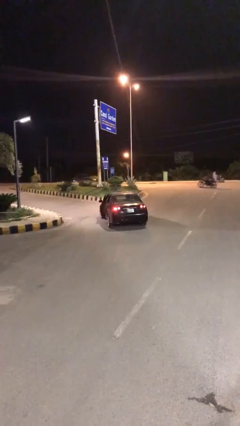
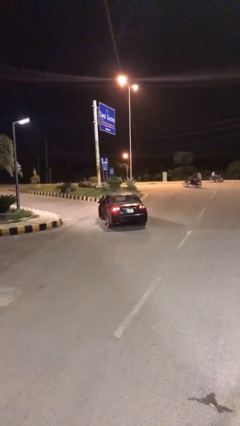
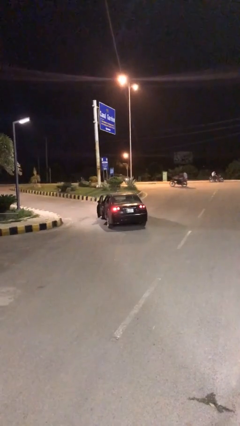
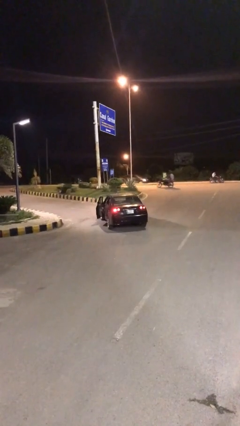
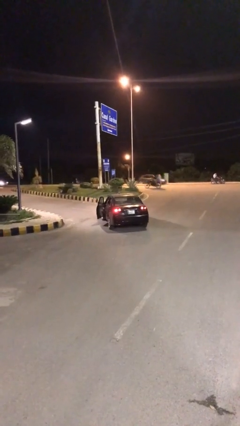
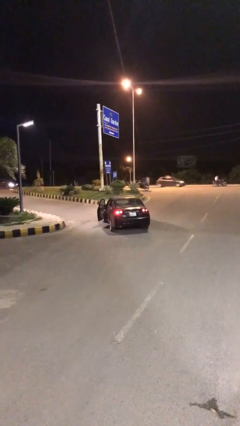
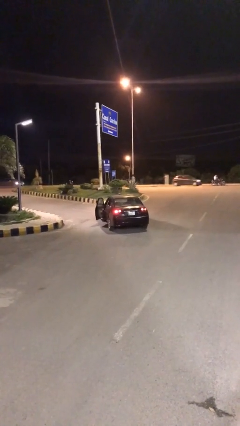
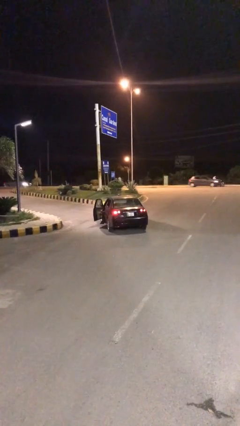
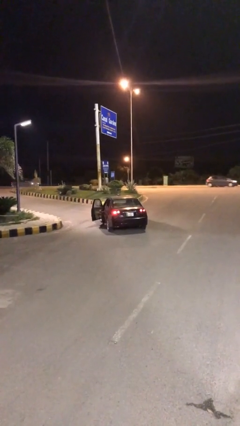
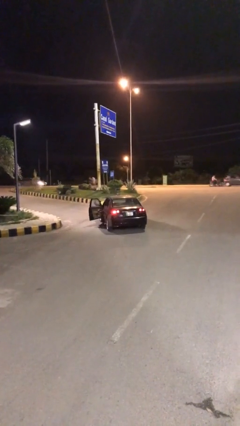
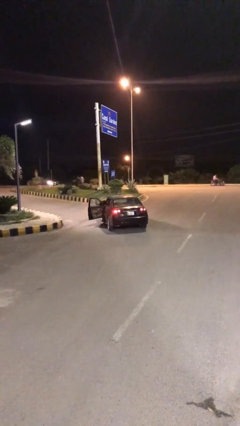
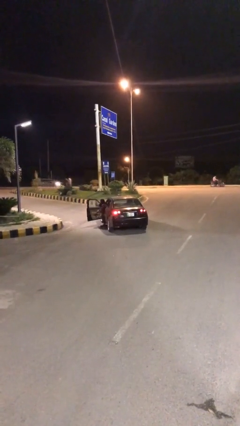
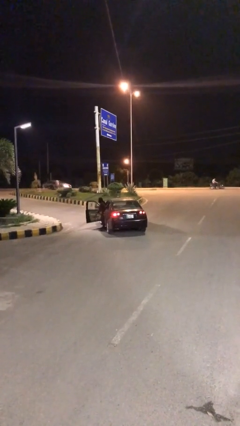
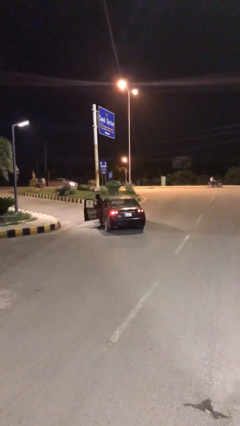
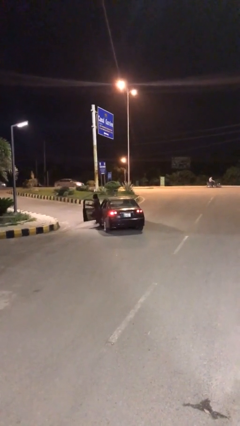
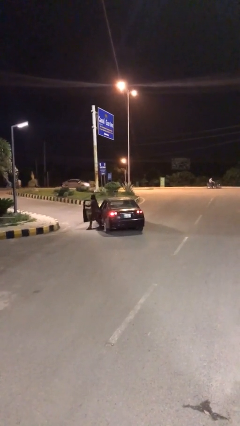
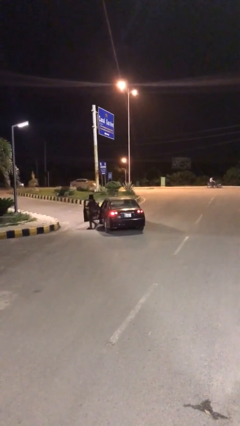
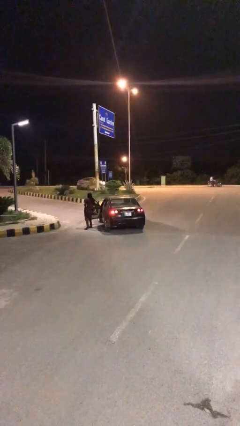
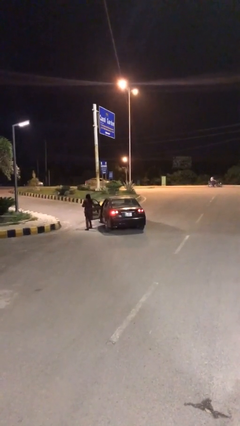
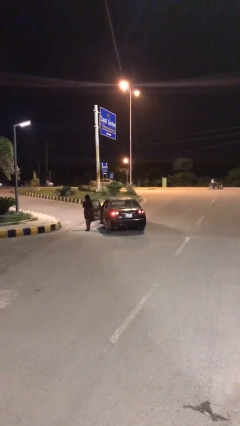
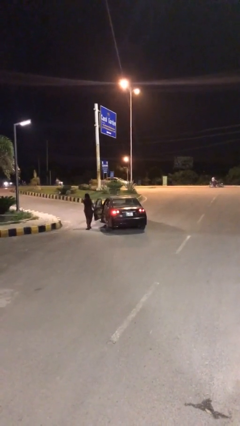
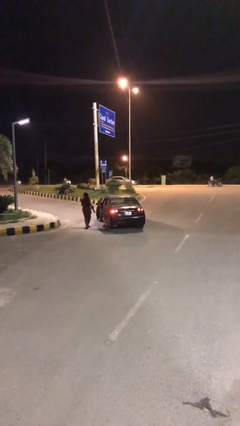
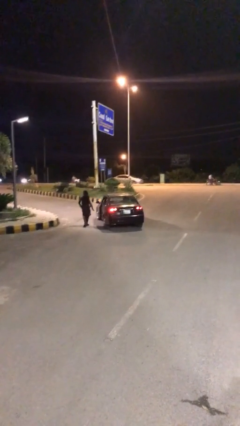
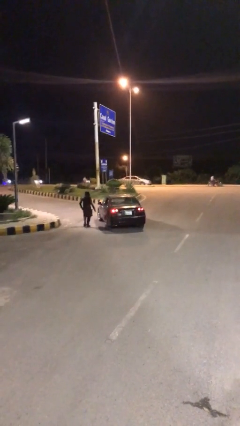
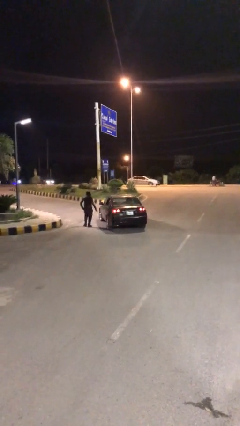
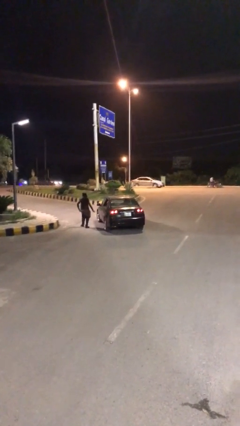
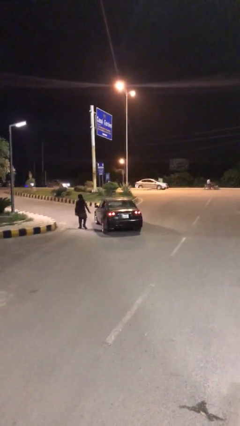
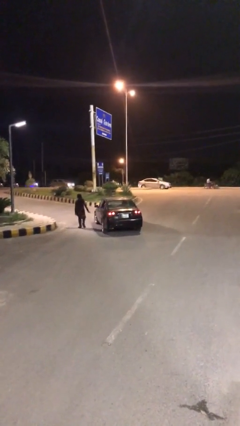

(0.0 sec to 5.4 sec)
car drops off person

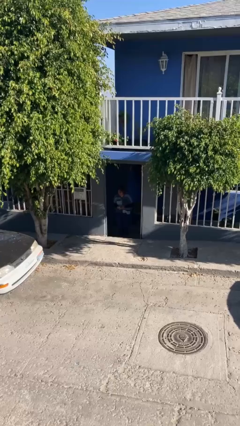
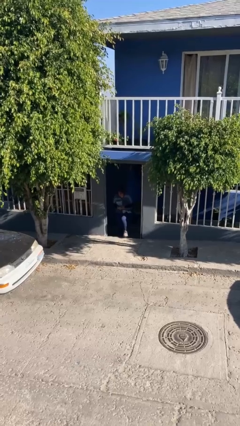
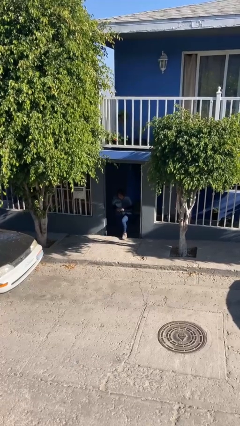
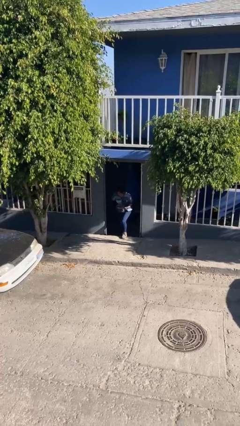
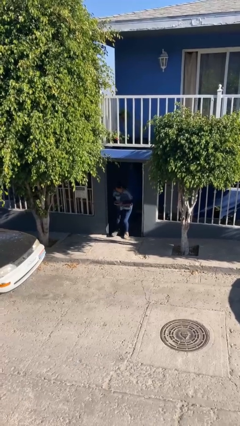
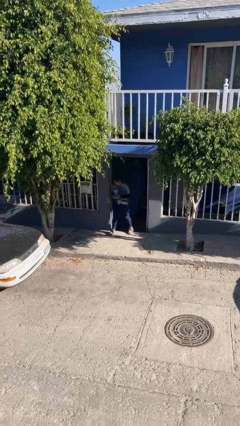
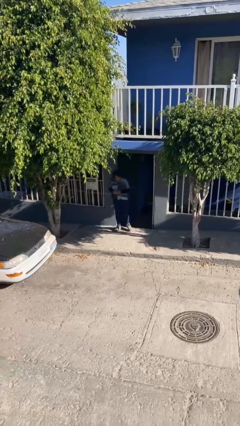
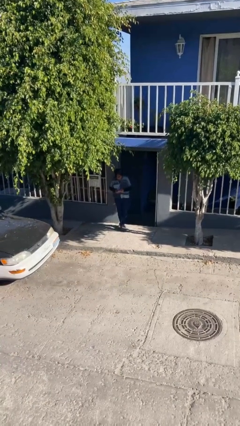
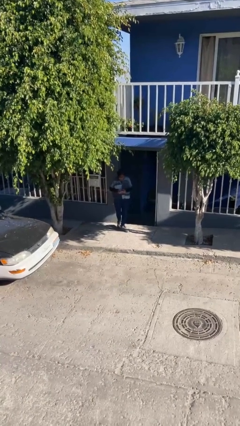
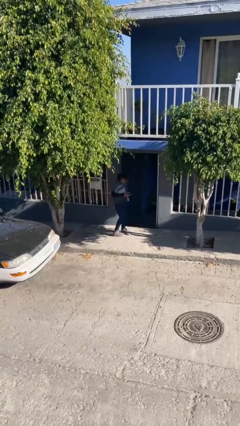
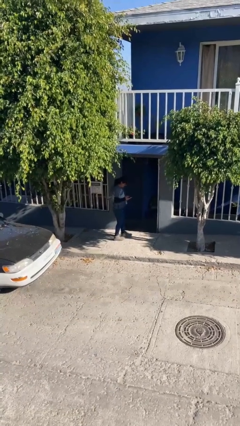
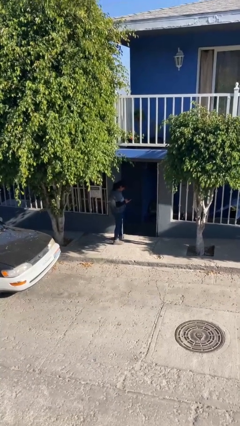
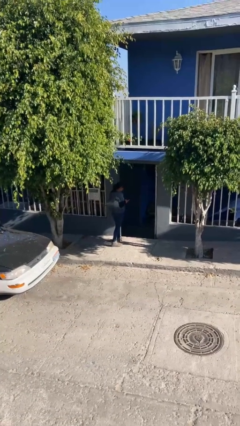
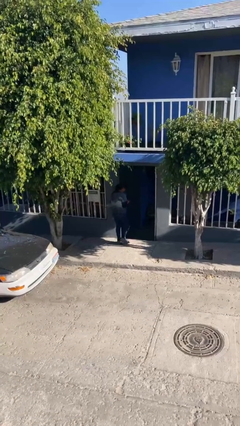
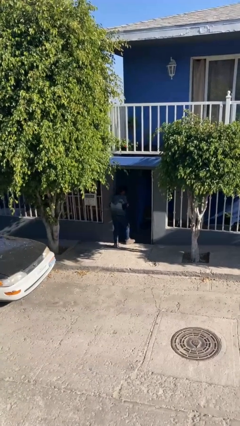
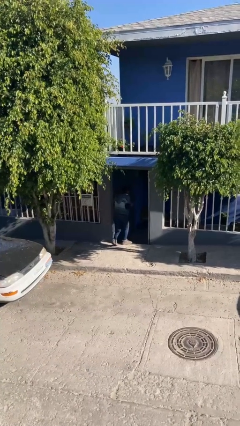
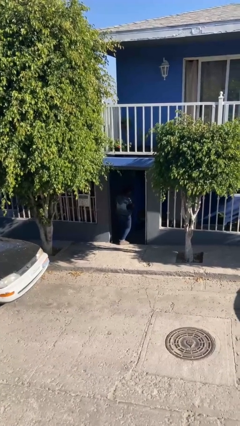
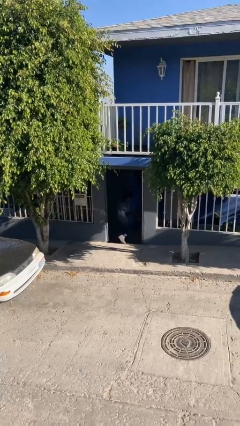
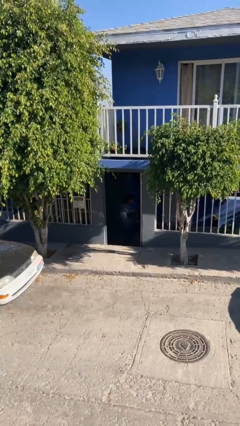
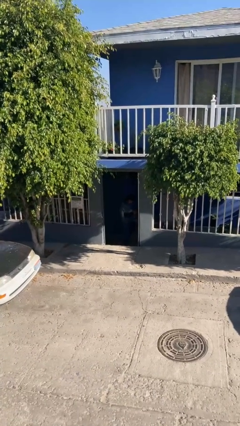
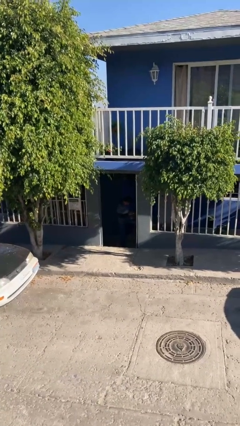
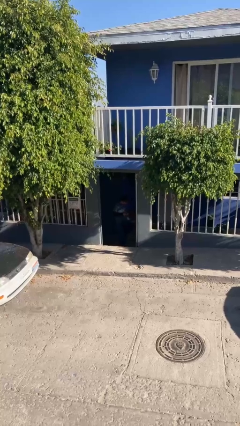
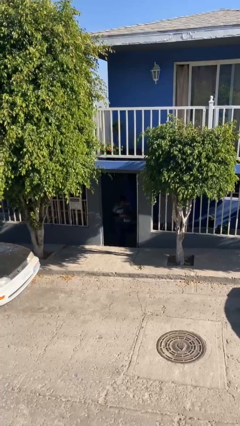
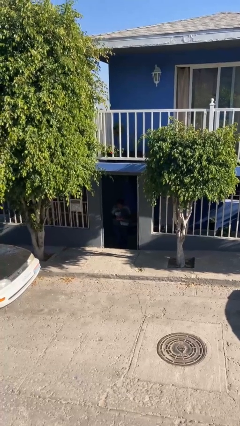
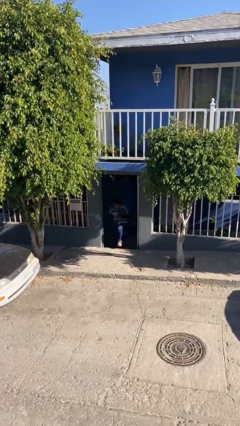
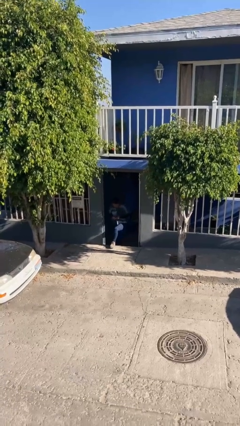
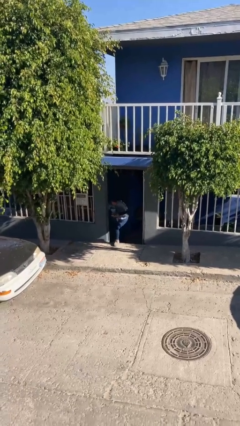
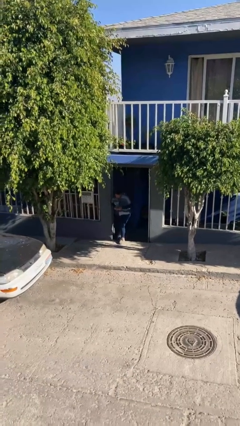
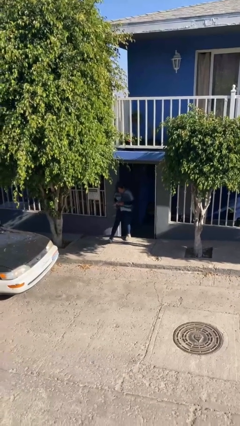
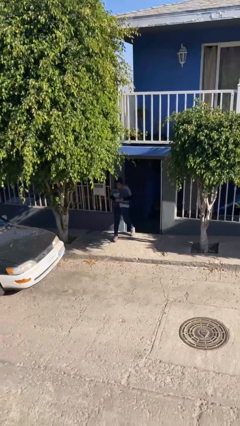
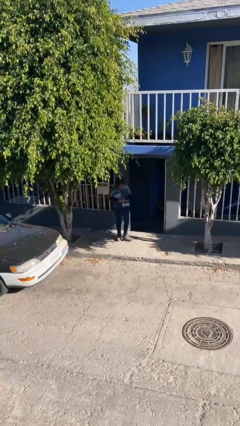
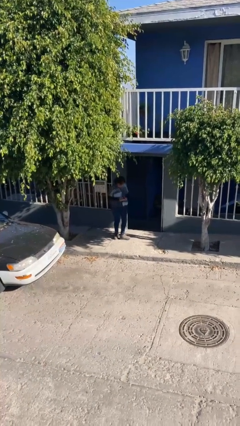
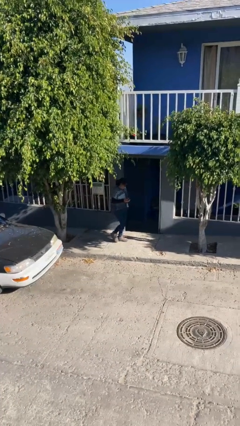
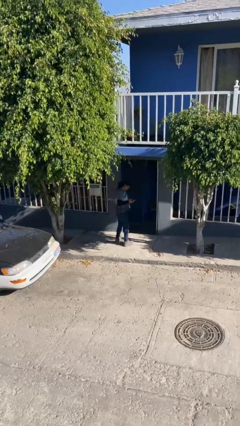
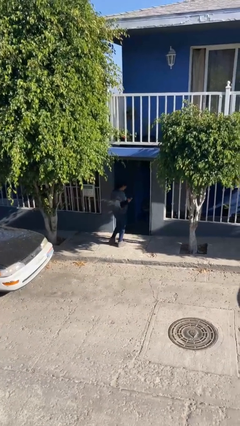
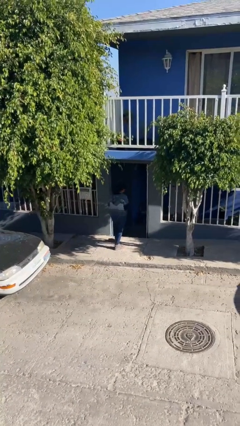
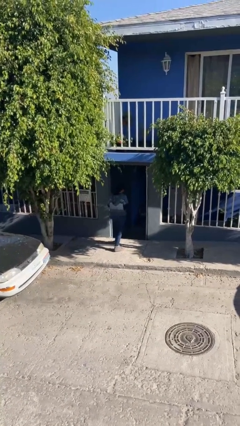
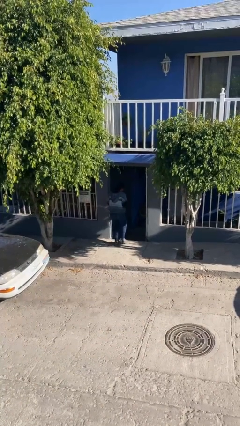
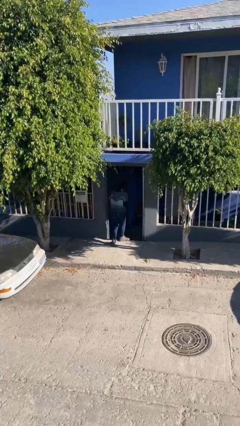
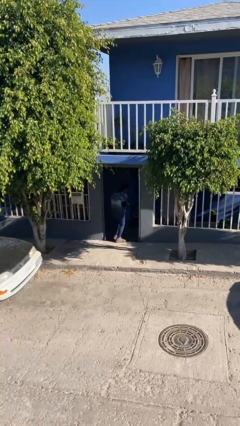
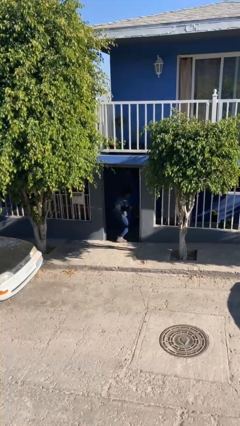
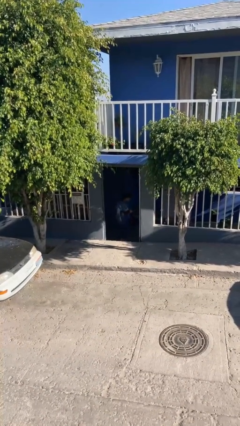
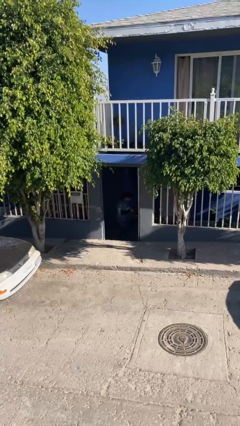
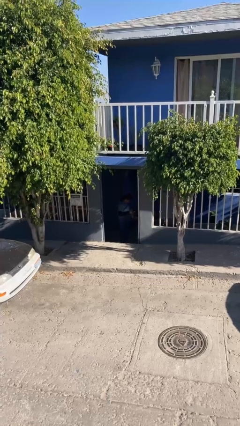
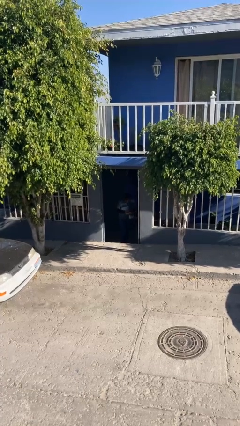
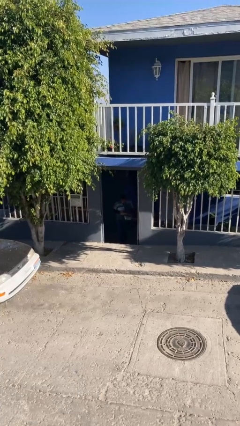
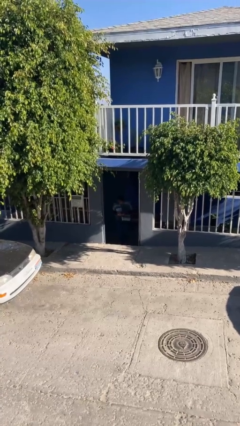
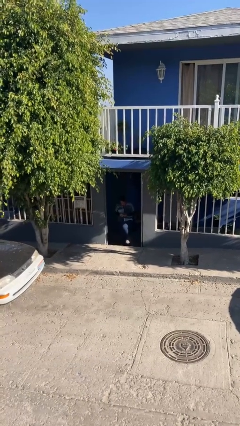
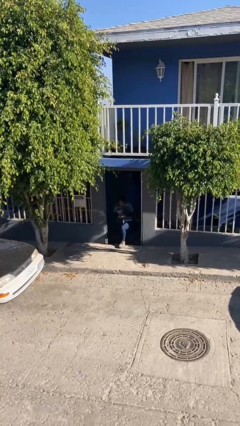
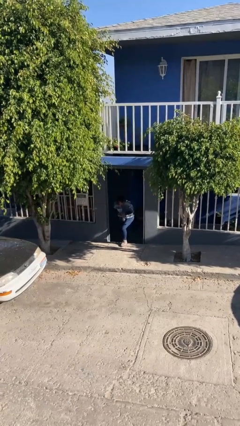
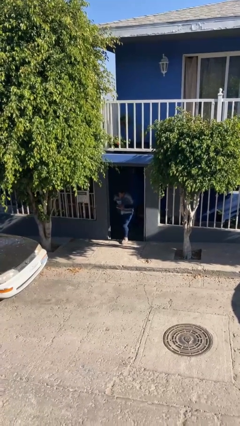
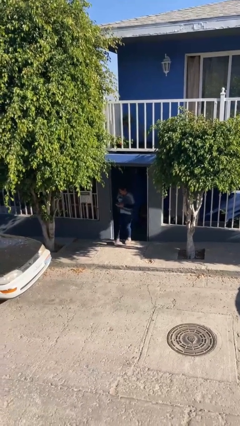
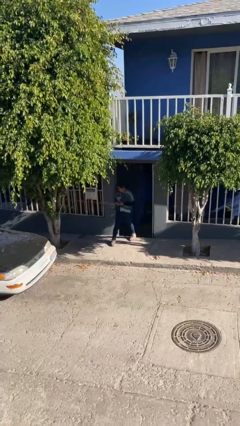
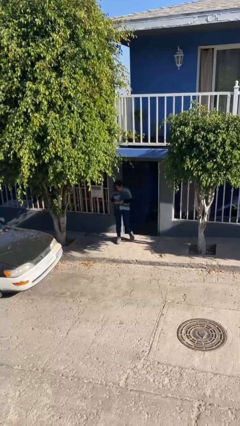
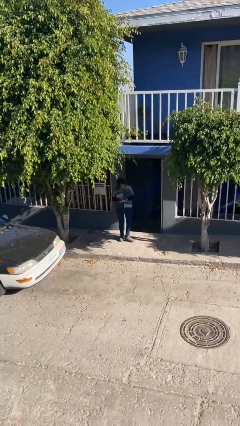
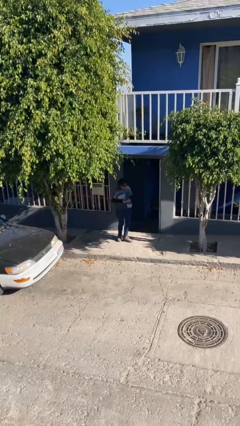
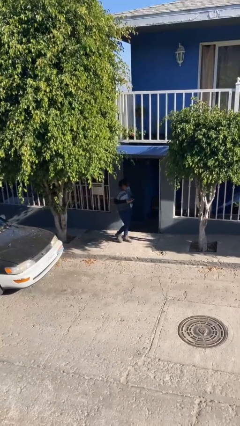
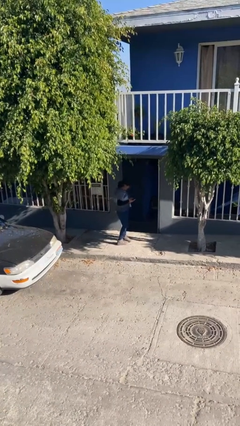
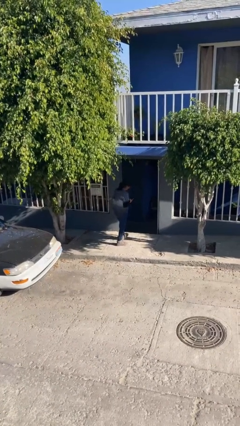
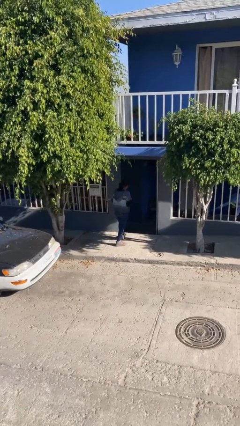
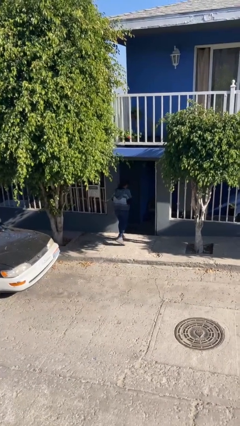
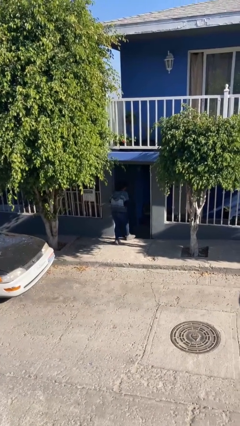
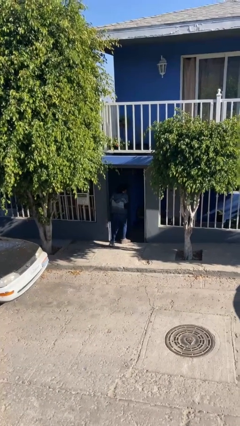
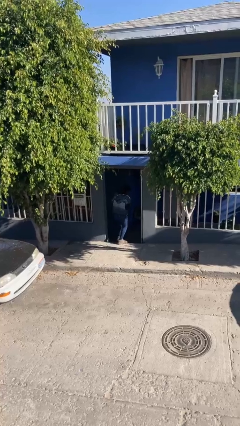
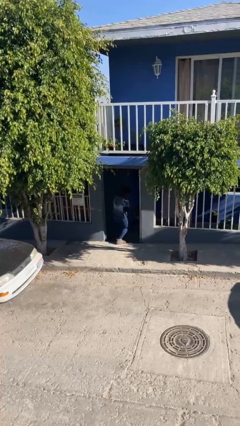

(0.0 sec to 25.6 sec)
person texts on phone
